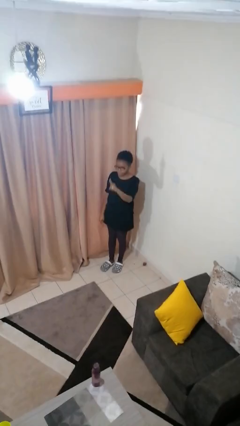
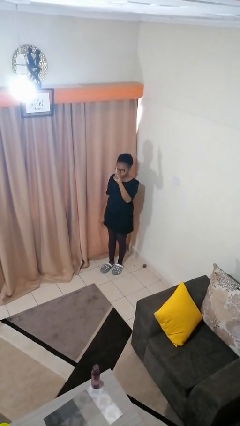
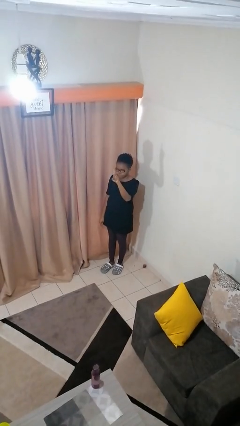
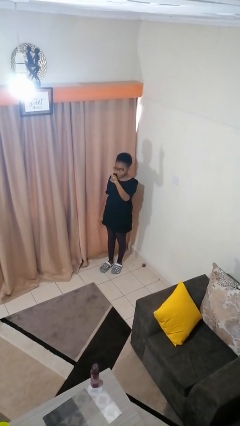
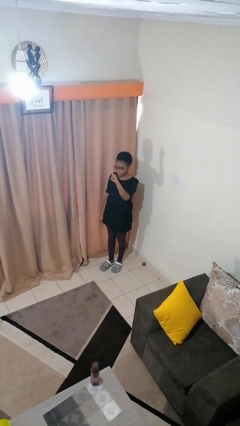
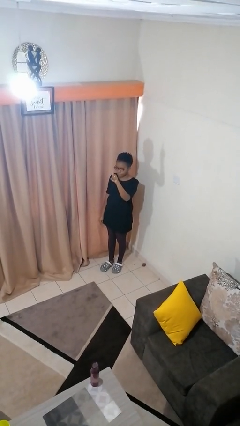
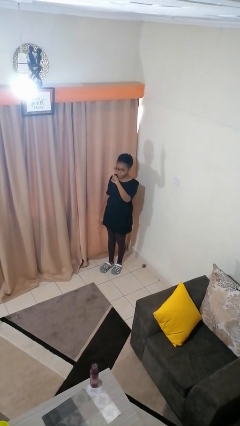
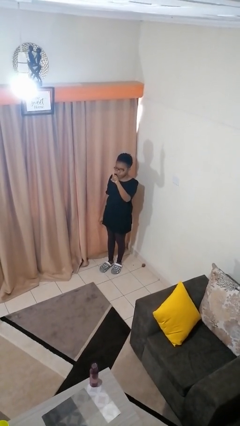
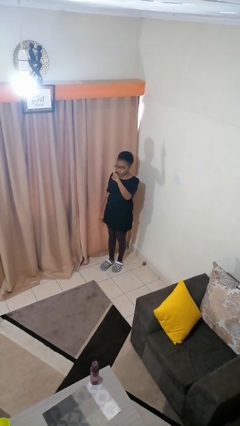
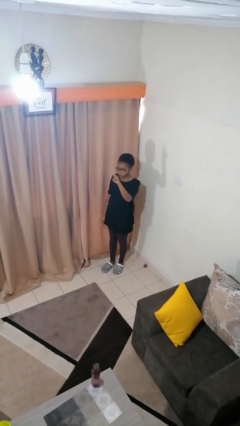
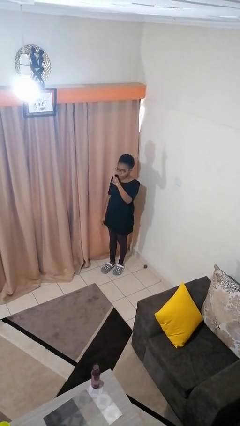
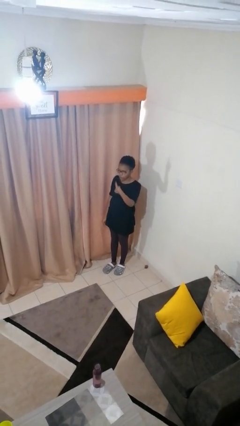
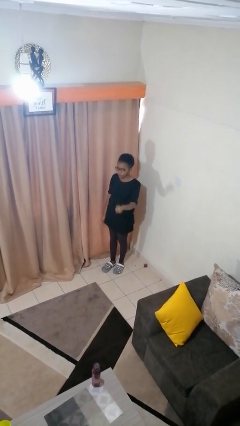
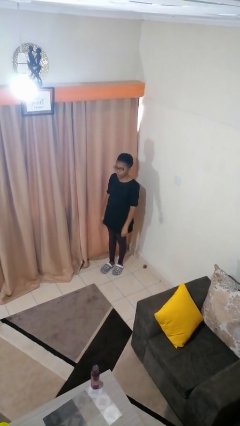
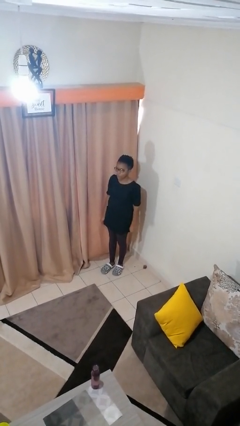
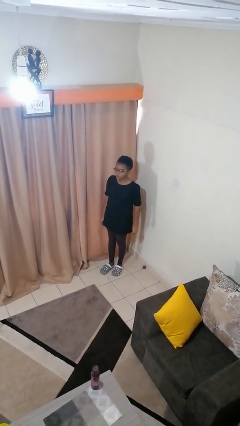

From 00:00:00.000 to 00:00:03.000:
person gestures number one

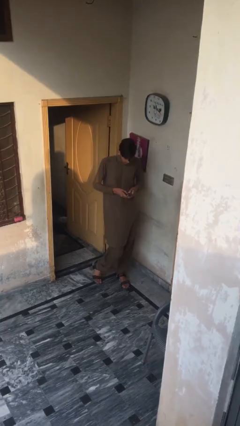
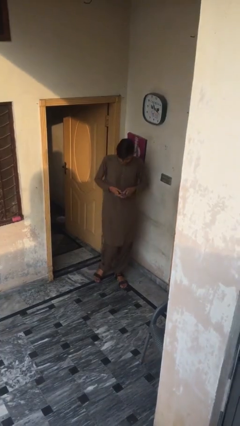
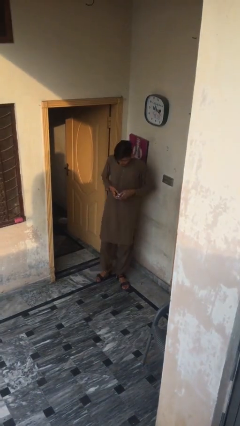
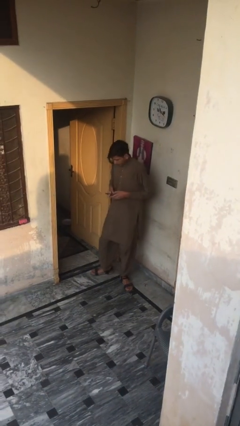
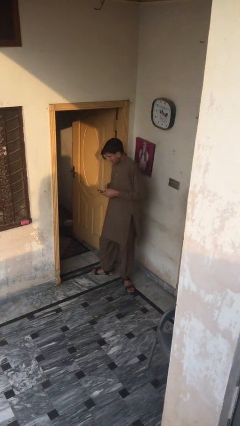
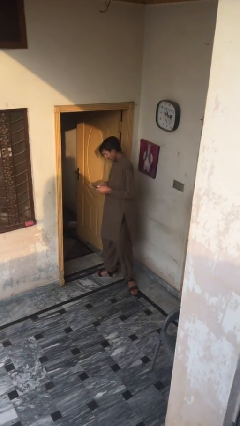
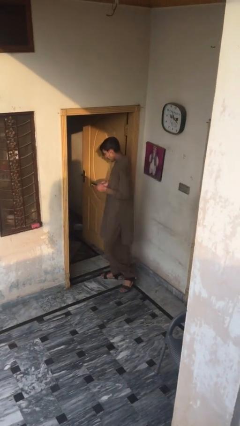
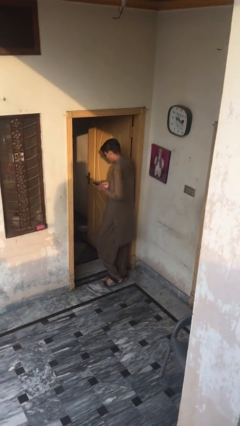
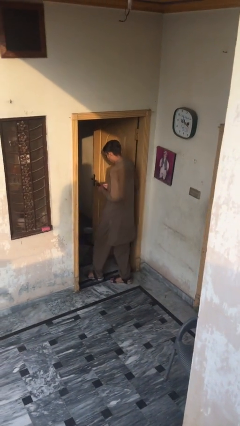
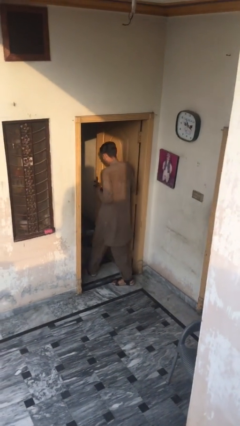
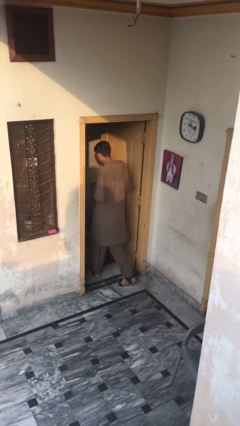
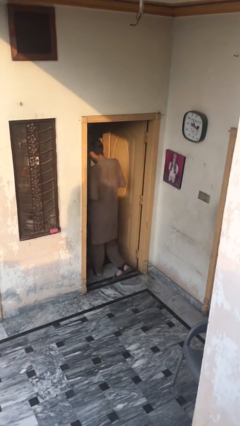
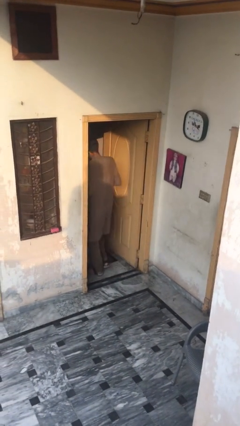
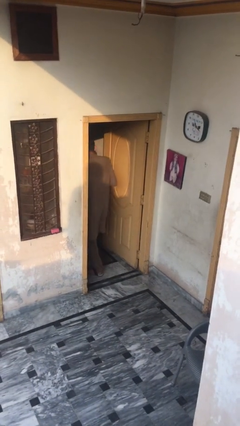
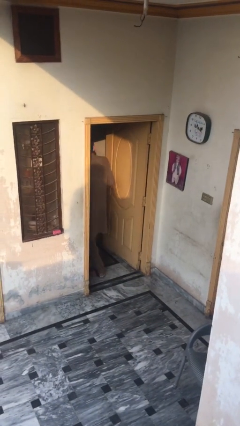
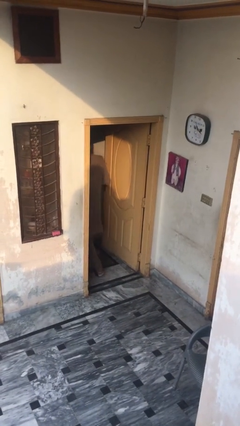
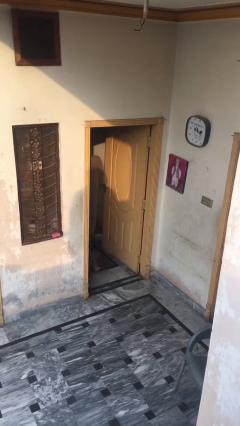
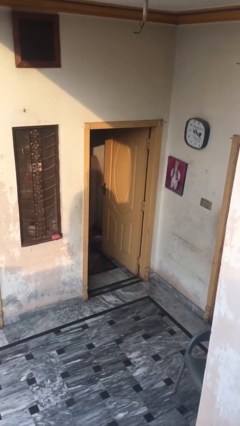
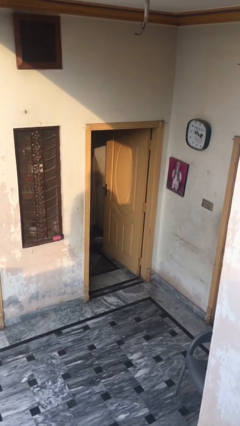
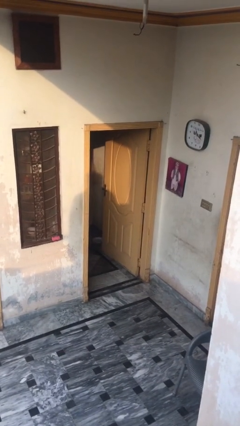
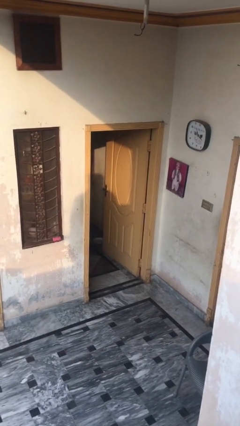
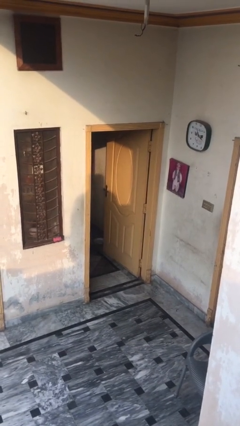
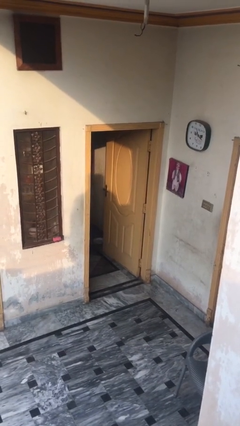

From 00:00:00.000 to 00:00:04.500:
person exits scene through structure

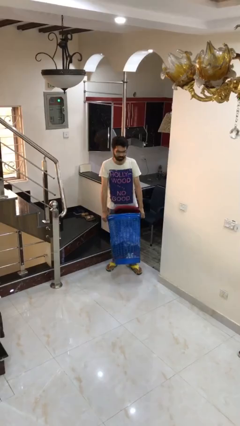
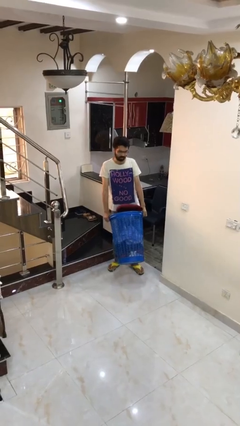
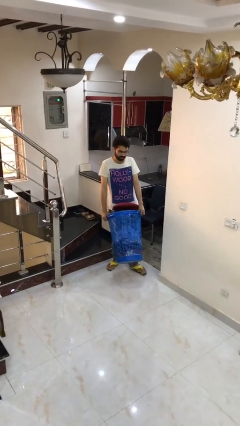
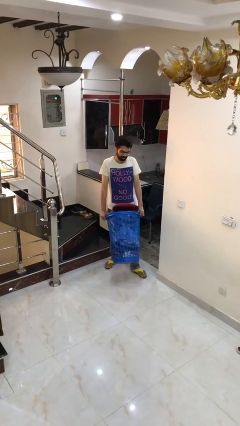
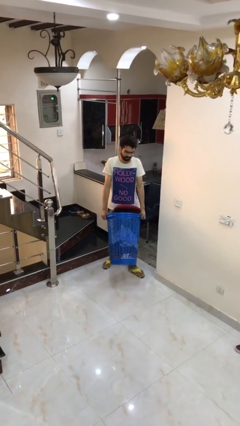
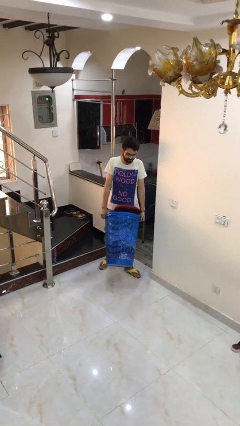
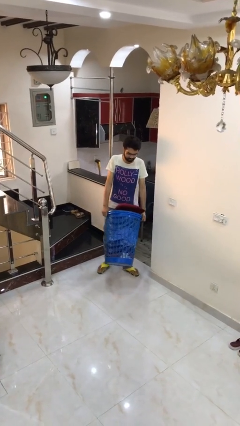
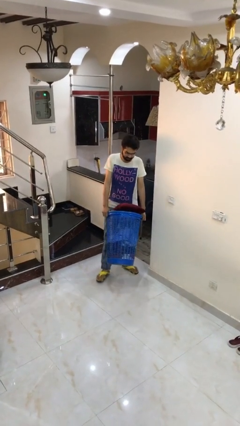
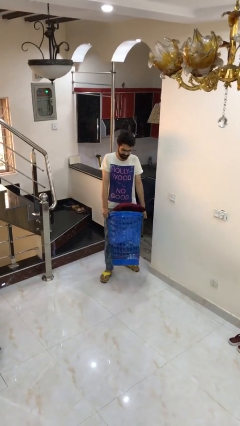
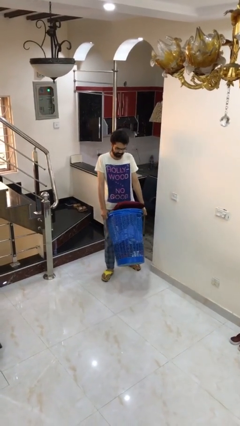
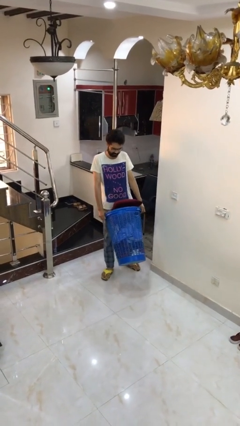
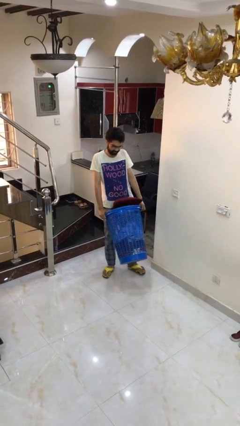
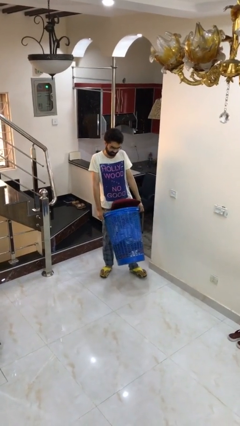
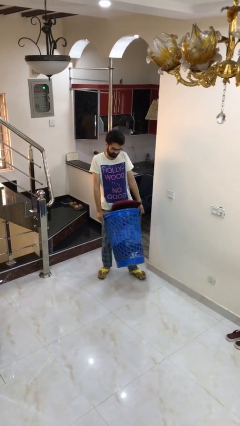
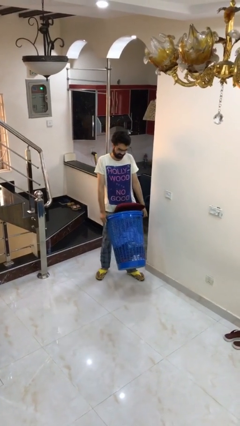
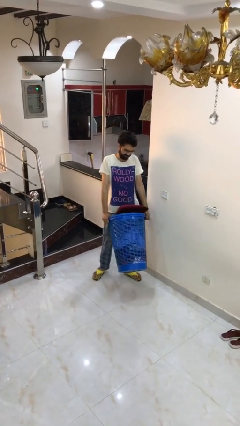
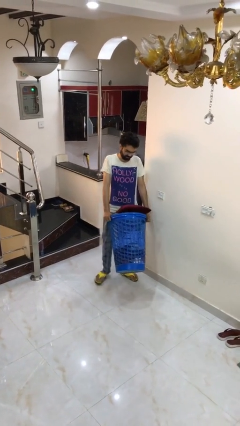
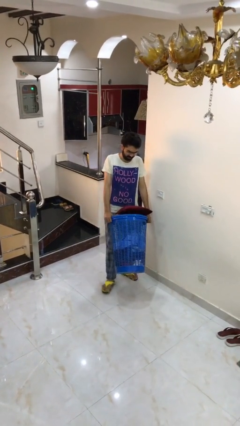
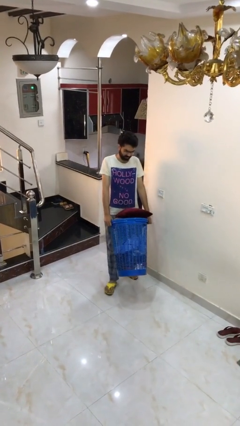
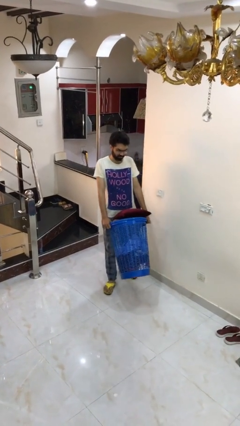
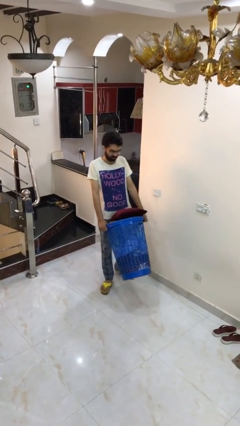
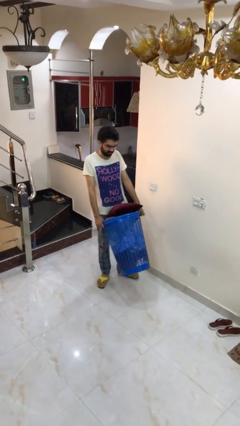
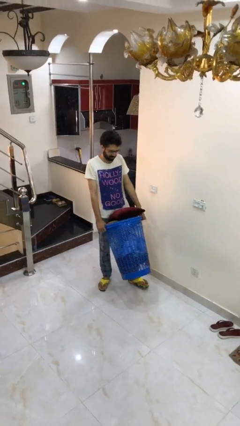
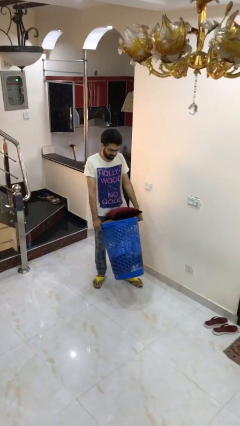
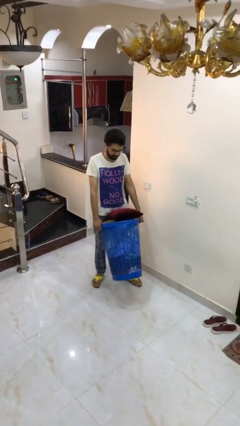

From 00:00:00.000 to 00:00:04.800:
person carries heavy object

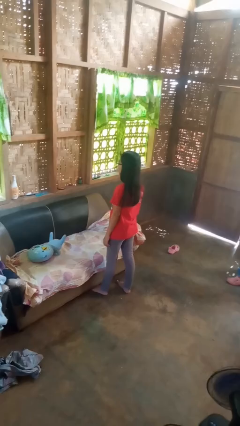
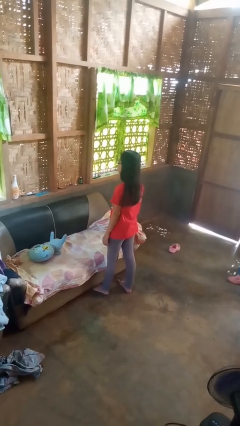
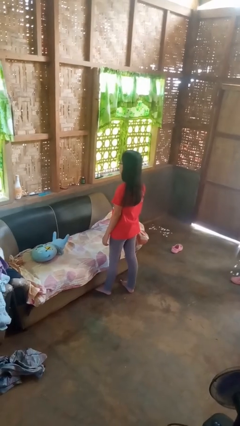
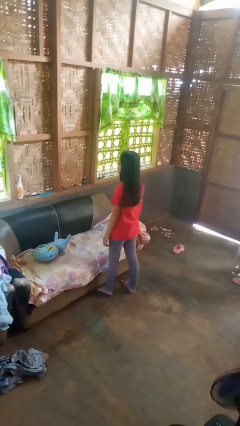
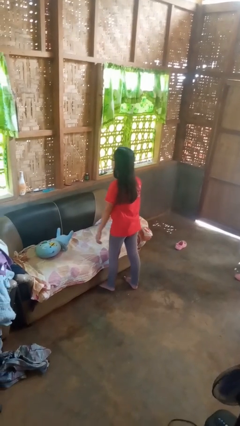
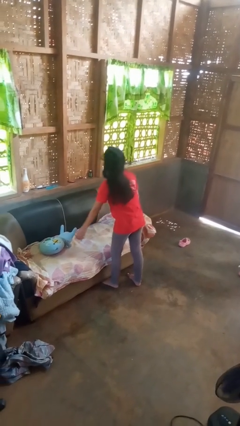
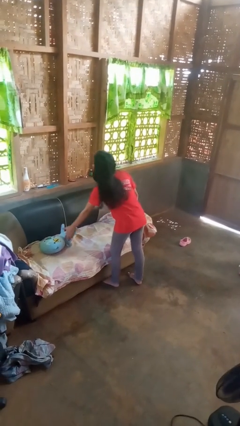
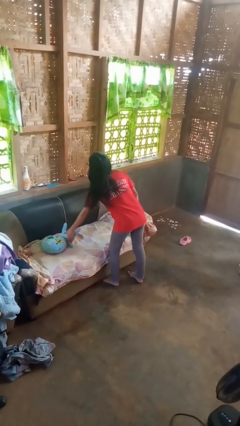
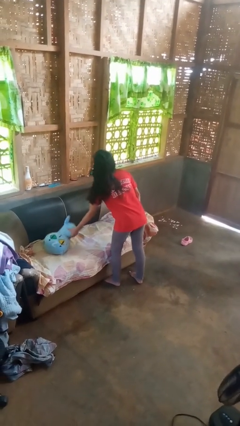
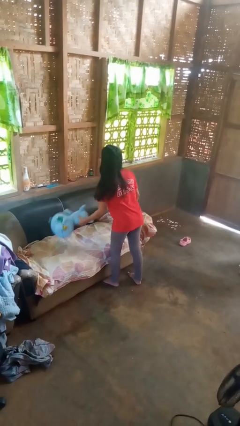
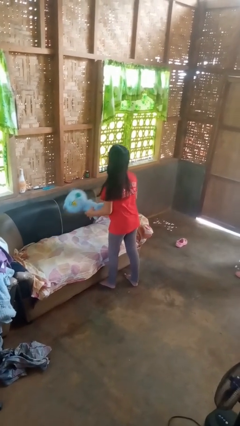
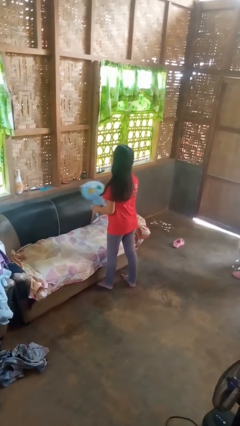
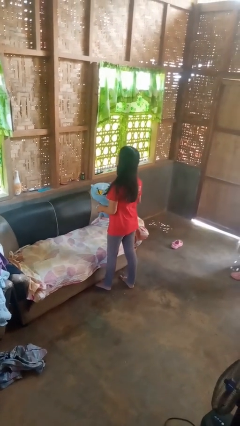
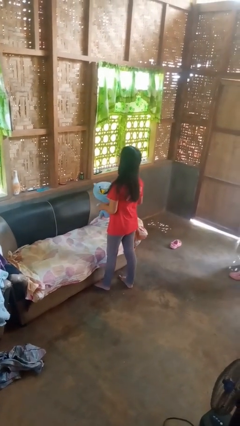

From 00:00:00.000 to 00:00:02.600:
person picks up object from couch

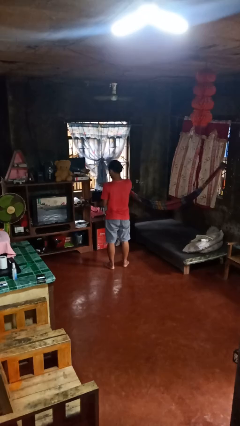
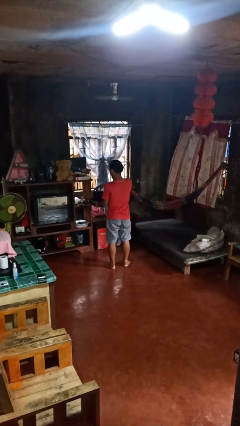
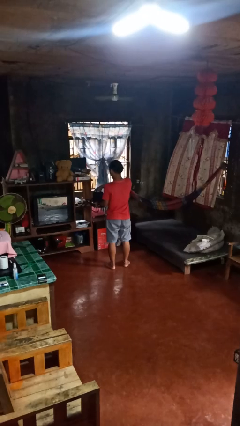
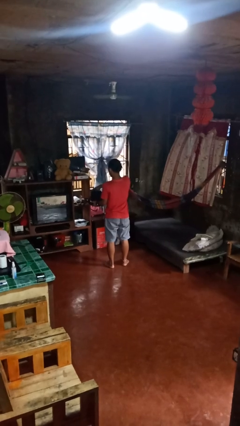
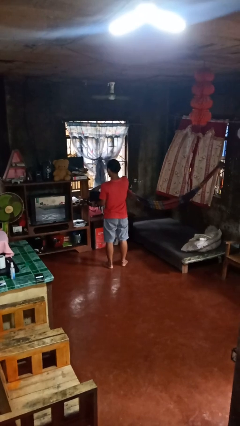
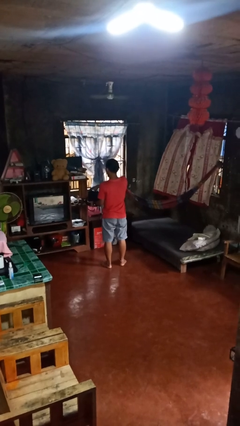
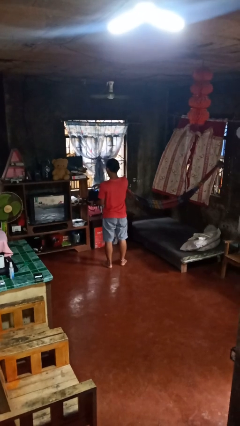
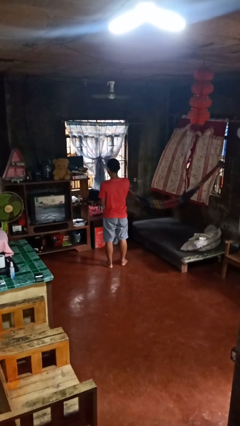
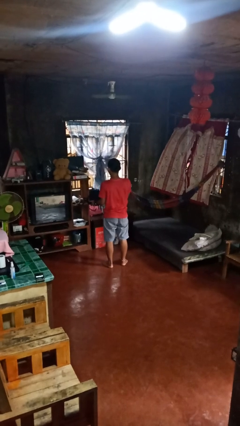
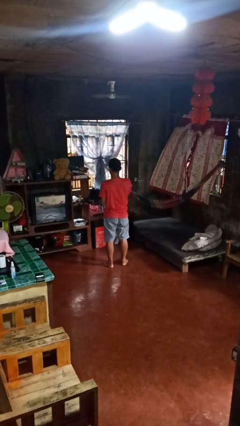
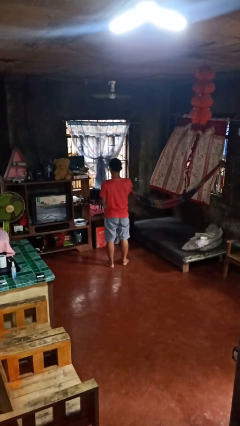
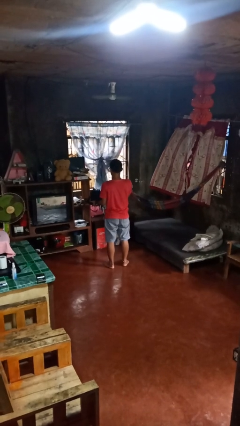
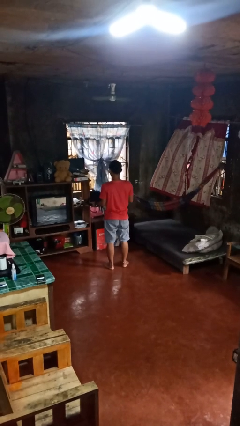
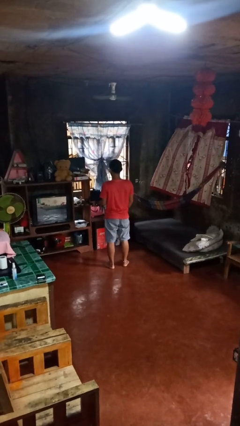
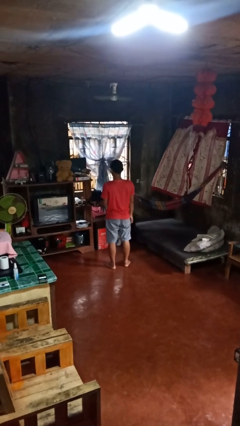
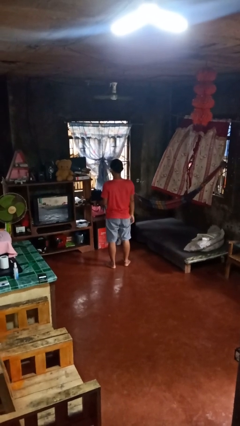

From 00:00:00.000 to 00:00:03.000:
person eats snack from bag
